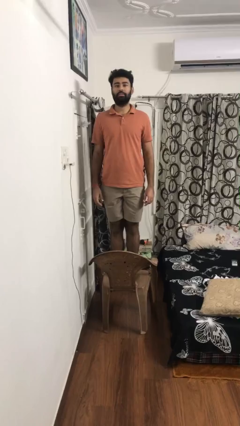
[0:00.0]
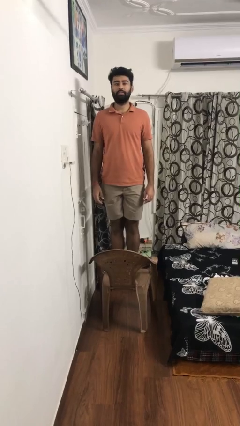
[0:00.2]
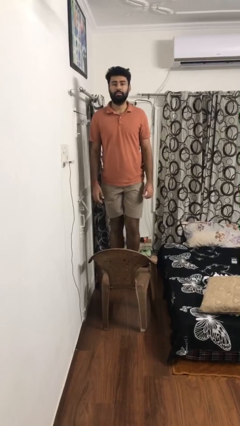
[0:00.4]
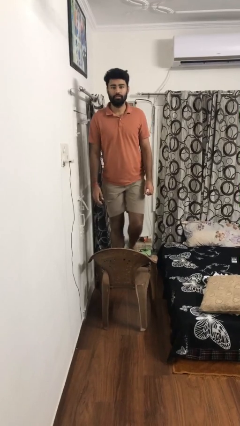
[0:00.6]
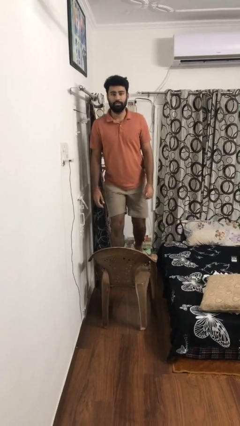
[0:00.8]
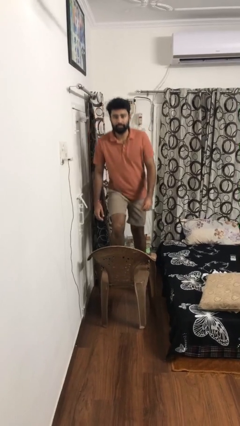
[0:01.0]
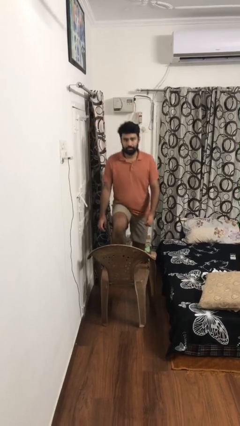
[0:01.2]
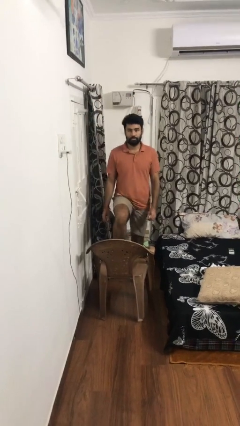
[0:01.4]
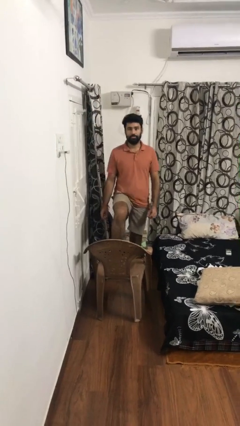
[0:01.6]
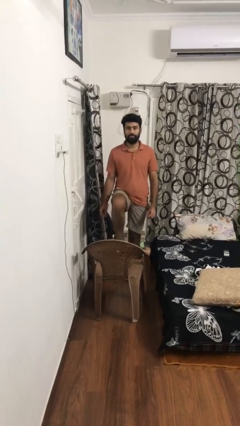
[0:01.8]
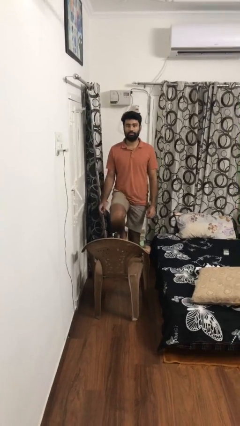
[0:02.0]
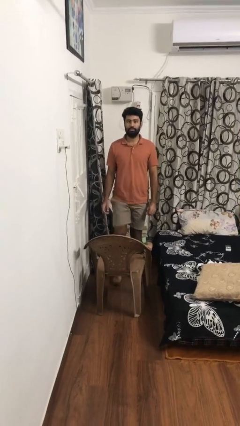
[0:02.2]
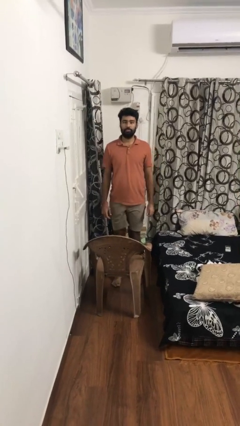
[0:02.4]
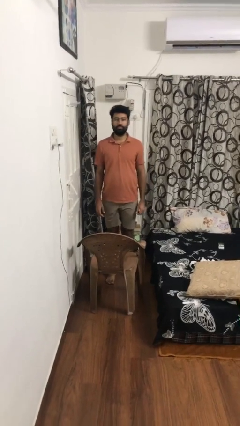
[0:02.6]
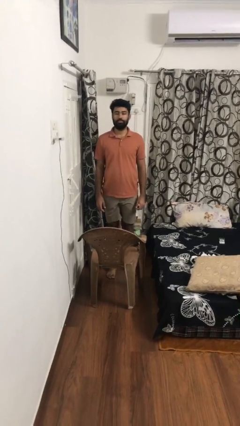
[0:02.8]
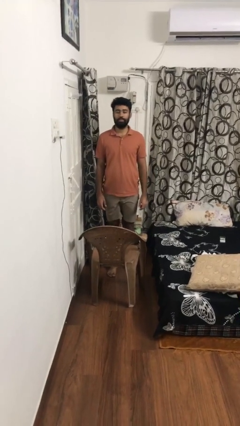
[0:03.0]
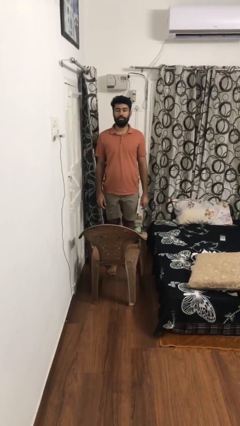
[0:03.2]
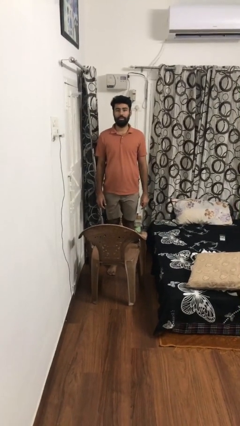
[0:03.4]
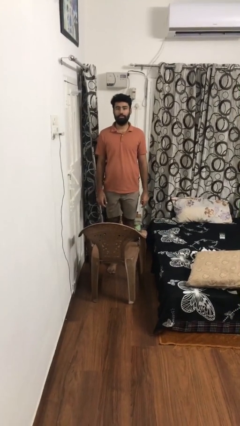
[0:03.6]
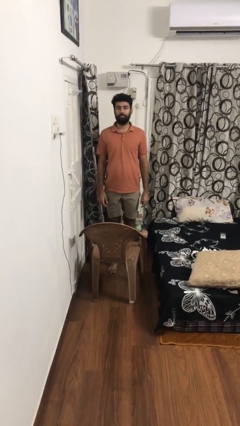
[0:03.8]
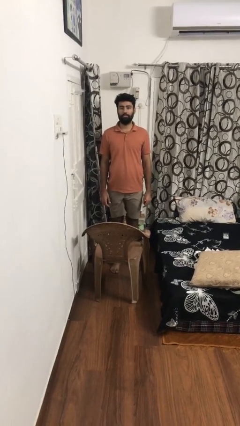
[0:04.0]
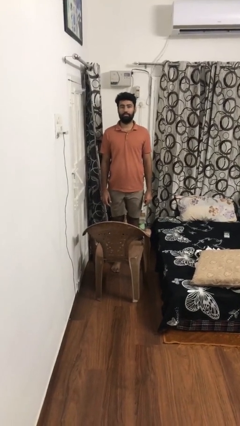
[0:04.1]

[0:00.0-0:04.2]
person climbs off chair

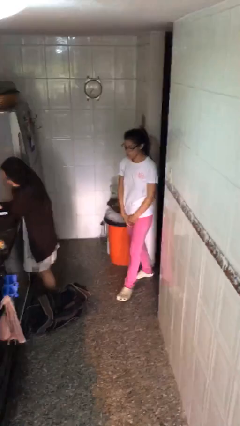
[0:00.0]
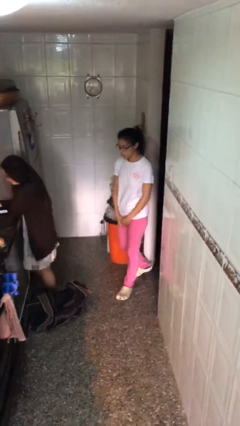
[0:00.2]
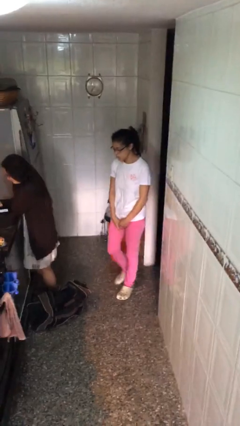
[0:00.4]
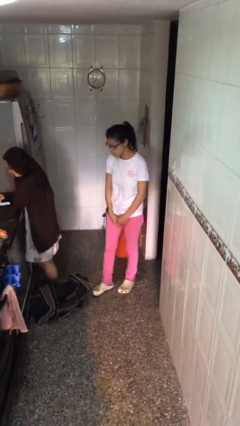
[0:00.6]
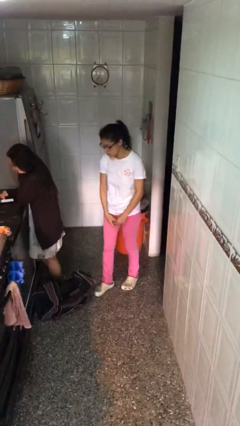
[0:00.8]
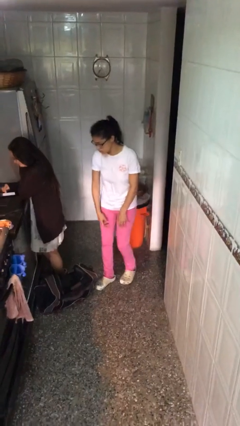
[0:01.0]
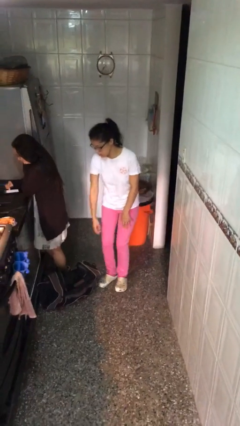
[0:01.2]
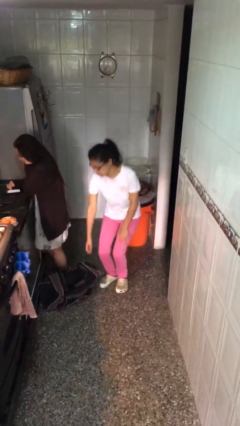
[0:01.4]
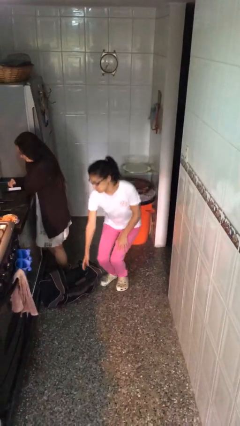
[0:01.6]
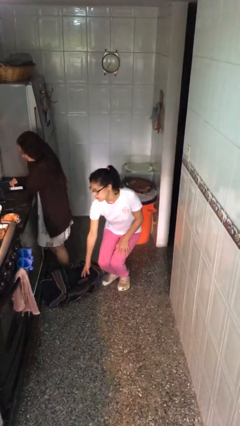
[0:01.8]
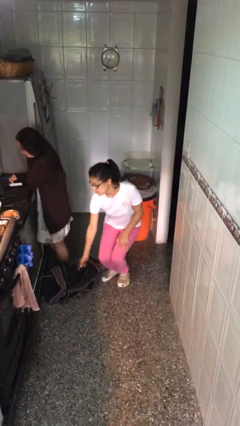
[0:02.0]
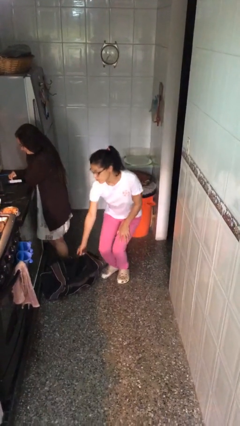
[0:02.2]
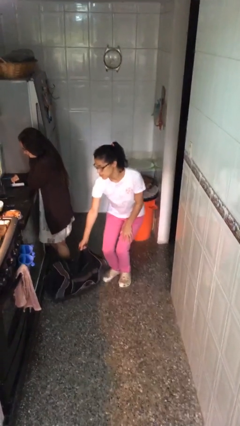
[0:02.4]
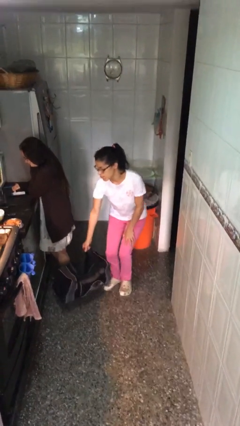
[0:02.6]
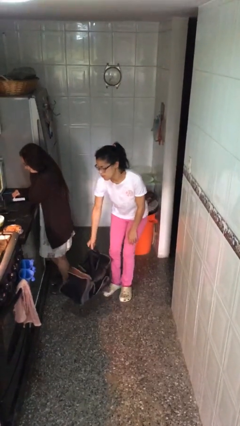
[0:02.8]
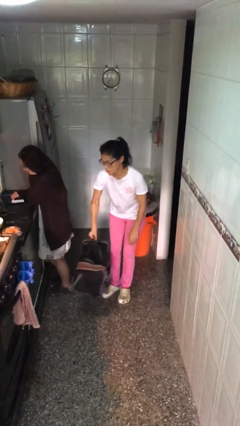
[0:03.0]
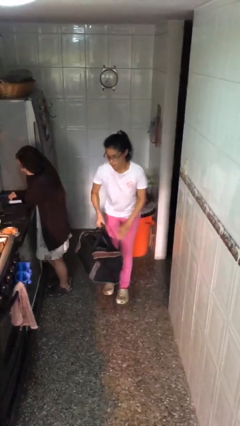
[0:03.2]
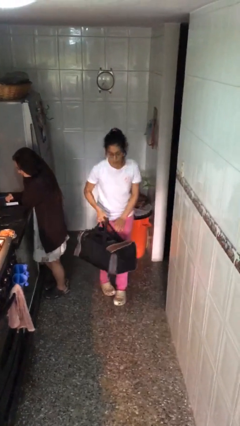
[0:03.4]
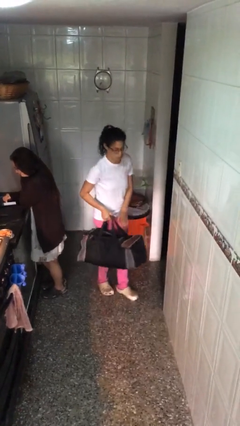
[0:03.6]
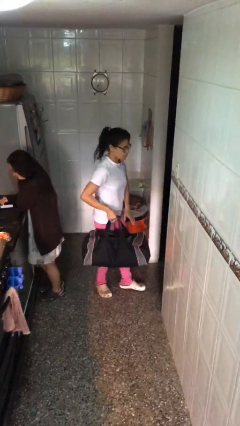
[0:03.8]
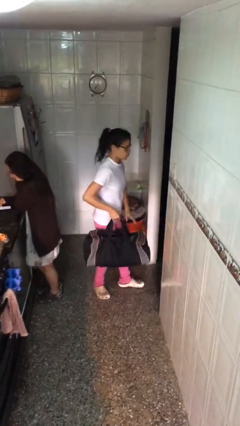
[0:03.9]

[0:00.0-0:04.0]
person steals object from person

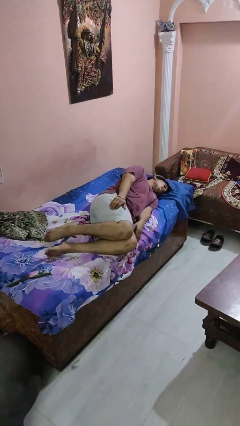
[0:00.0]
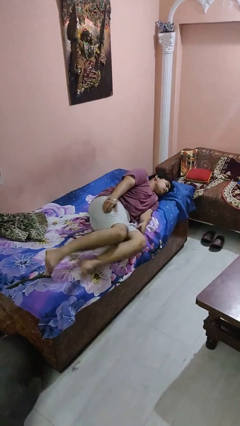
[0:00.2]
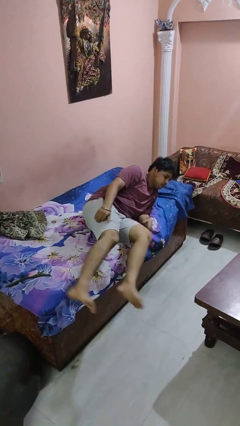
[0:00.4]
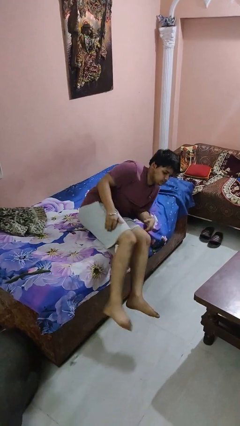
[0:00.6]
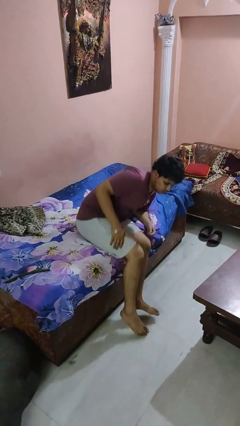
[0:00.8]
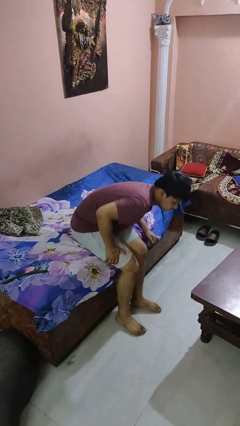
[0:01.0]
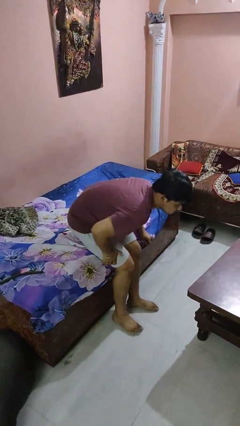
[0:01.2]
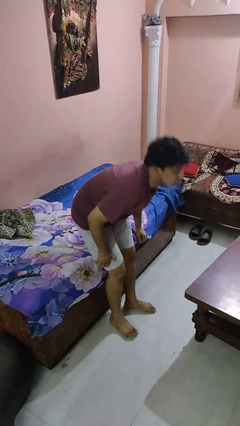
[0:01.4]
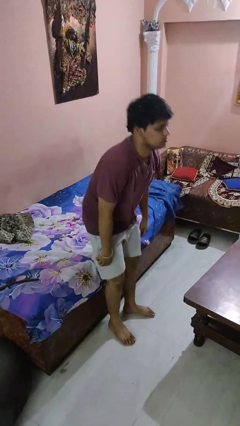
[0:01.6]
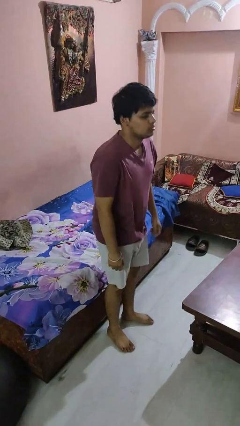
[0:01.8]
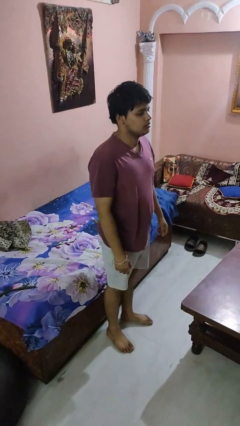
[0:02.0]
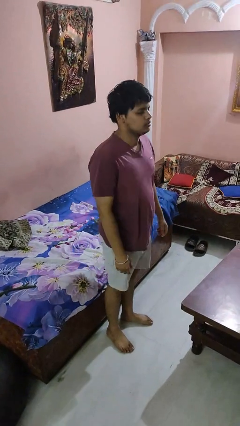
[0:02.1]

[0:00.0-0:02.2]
person stands up

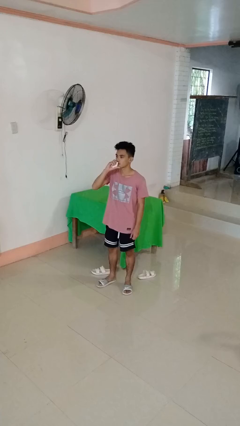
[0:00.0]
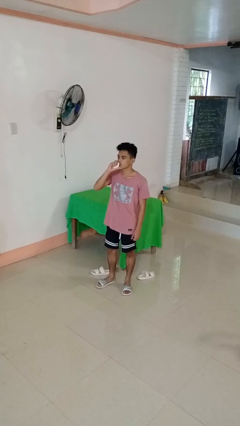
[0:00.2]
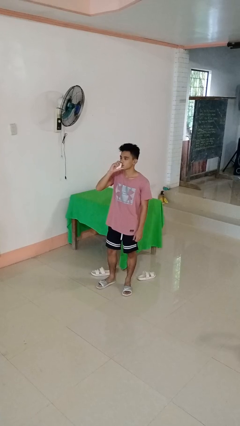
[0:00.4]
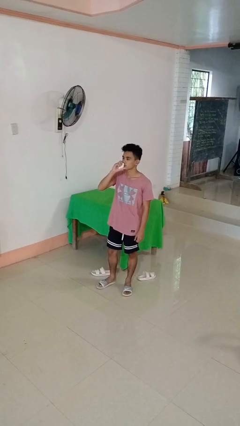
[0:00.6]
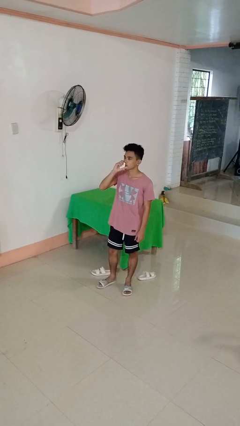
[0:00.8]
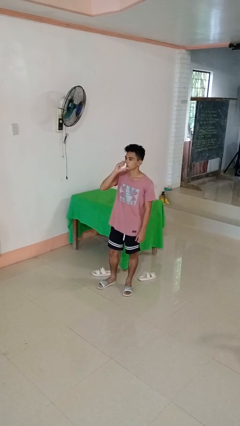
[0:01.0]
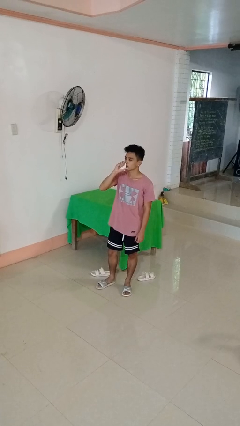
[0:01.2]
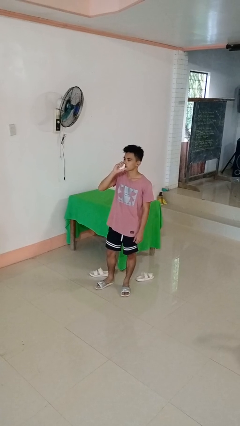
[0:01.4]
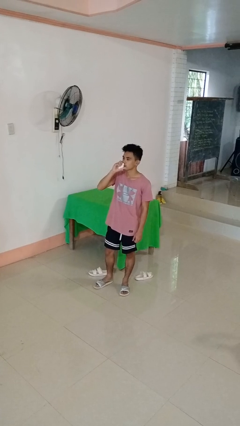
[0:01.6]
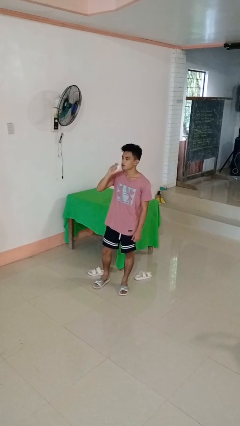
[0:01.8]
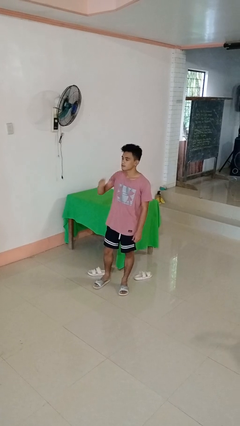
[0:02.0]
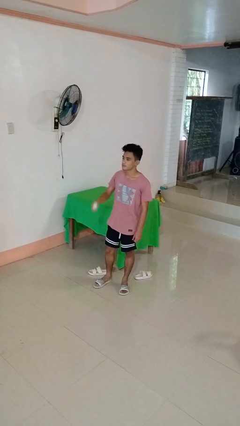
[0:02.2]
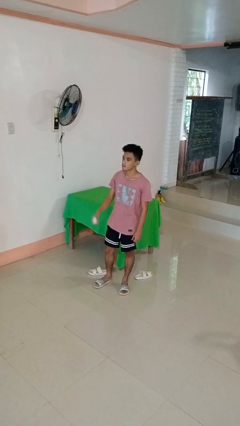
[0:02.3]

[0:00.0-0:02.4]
person vapes

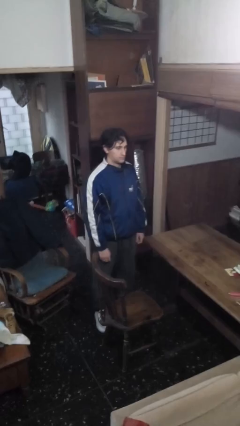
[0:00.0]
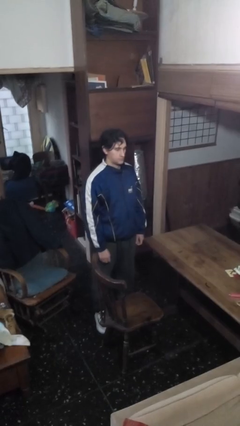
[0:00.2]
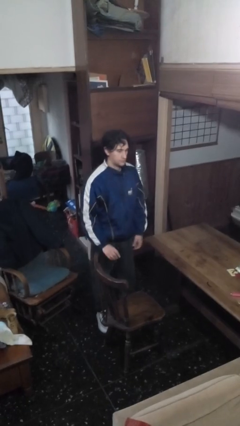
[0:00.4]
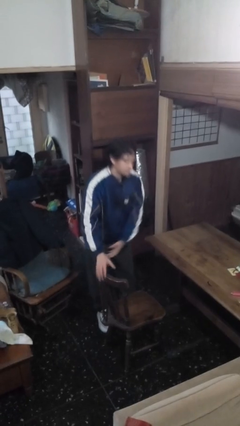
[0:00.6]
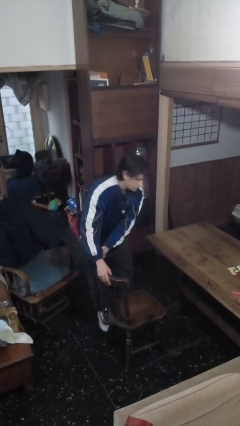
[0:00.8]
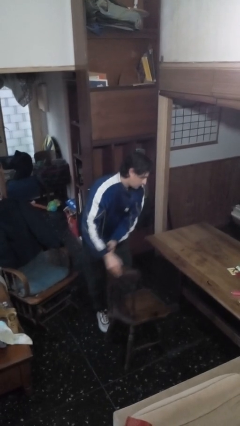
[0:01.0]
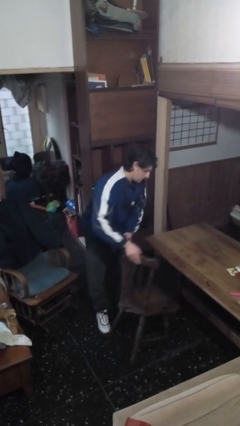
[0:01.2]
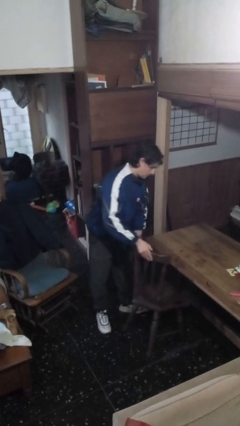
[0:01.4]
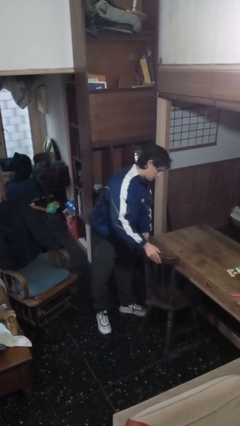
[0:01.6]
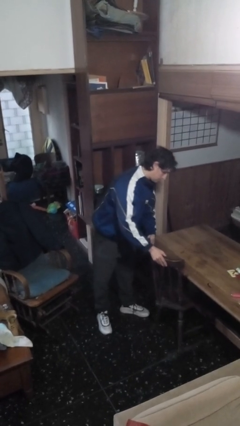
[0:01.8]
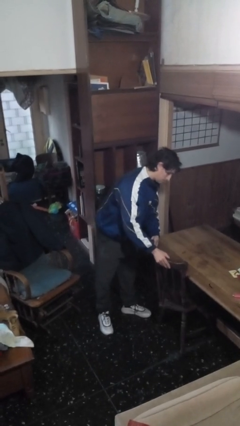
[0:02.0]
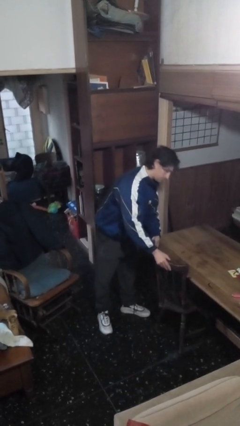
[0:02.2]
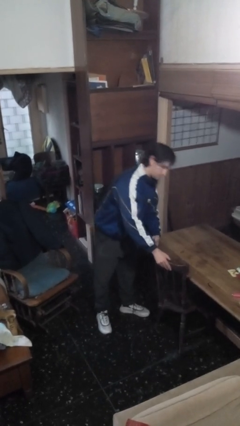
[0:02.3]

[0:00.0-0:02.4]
person pushes in chair

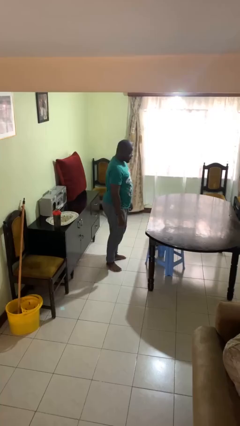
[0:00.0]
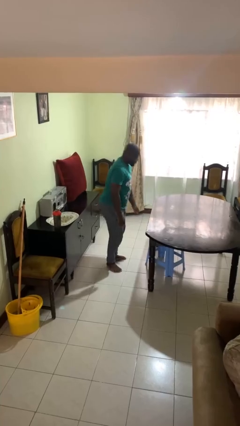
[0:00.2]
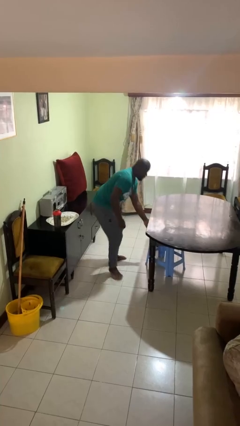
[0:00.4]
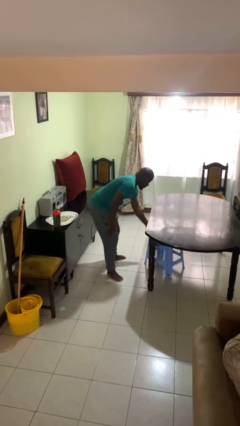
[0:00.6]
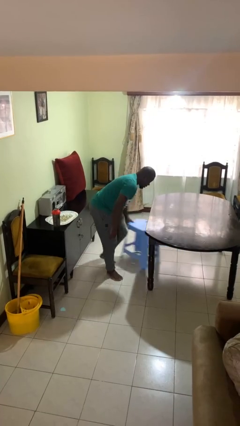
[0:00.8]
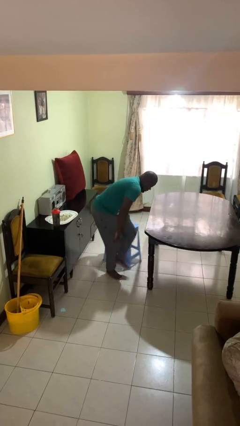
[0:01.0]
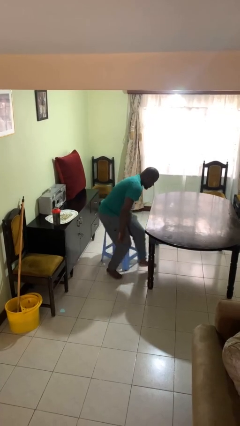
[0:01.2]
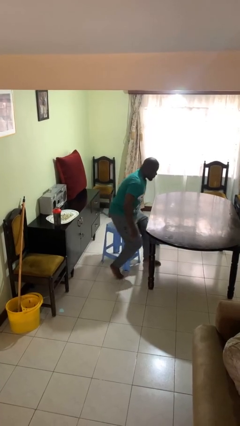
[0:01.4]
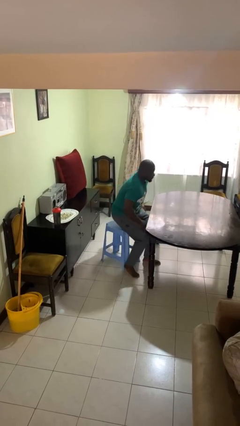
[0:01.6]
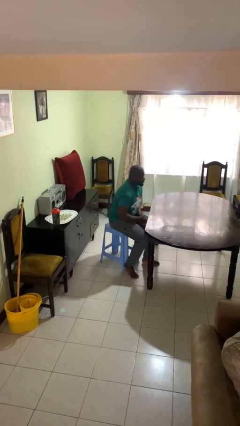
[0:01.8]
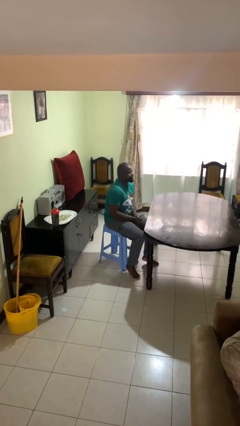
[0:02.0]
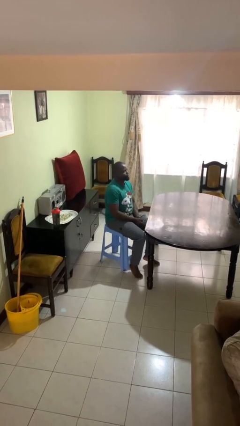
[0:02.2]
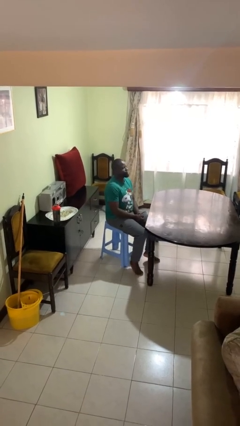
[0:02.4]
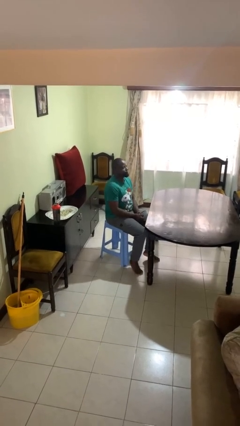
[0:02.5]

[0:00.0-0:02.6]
person sits down
